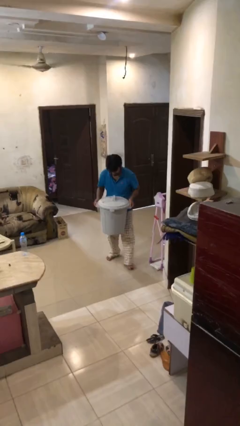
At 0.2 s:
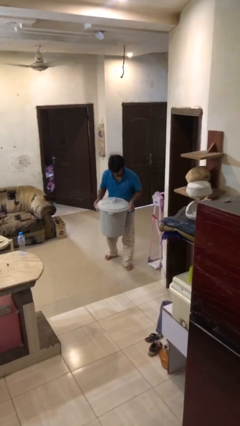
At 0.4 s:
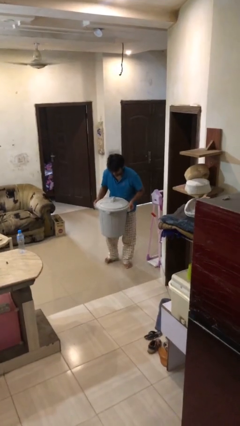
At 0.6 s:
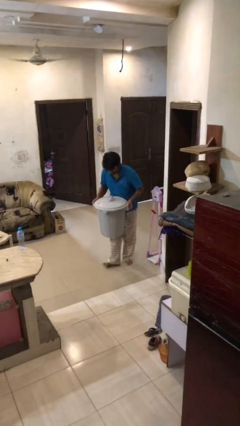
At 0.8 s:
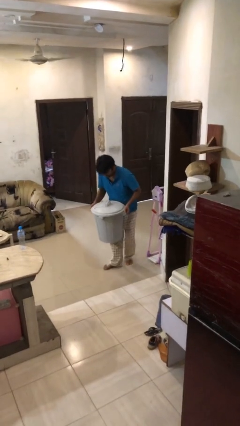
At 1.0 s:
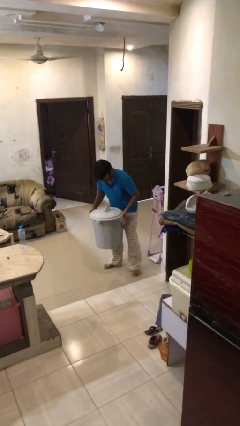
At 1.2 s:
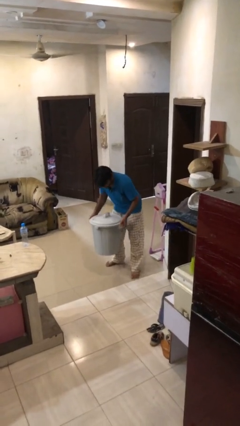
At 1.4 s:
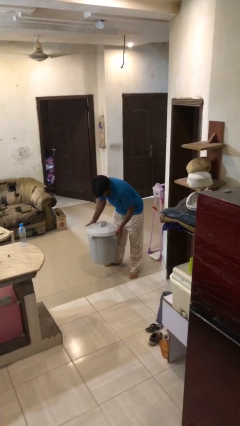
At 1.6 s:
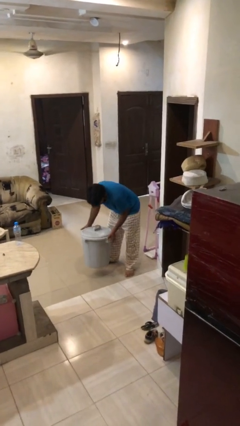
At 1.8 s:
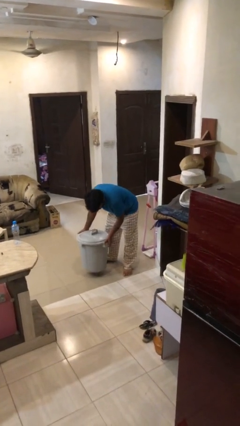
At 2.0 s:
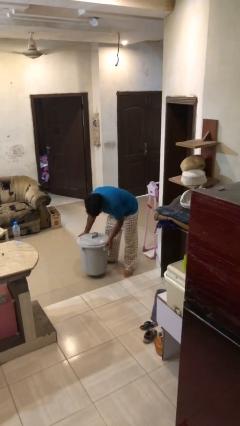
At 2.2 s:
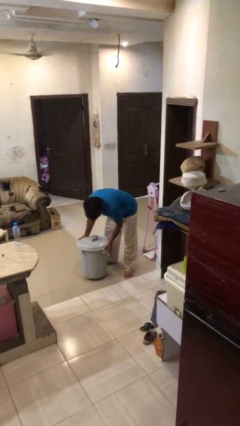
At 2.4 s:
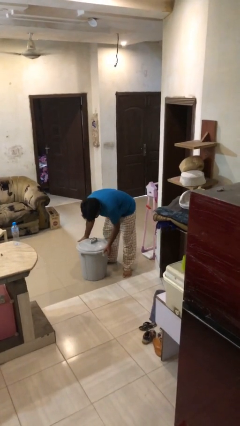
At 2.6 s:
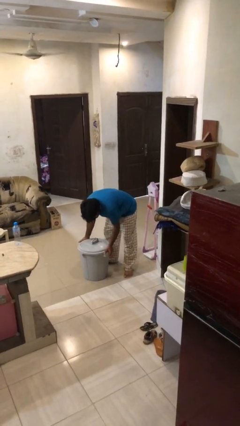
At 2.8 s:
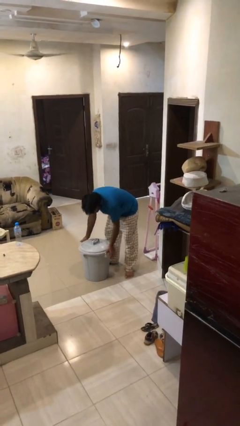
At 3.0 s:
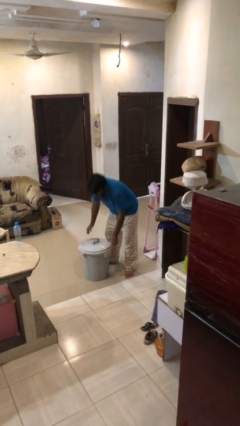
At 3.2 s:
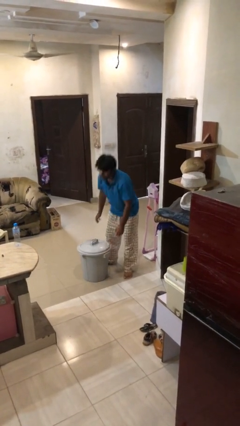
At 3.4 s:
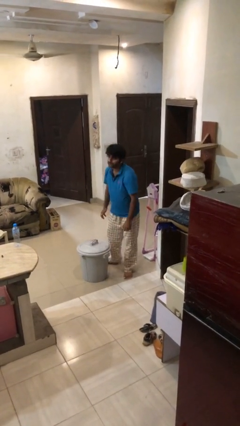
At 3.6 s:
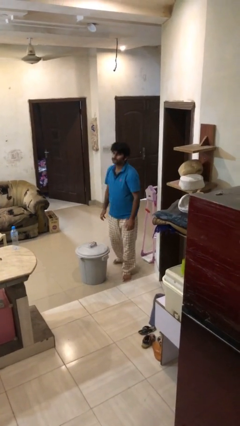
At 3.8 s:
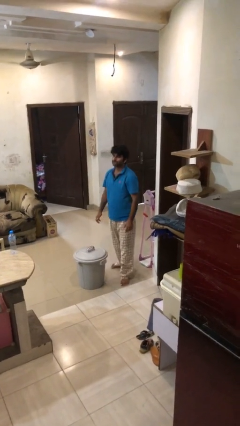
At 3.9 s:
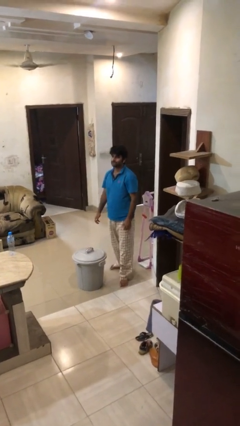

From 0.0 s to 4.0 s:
person puts down object on floor

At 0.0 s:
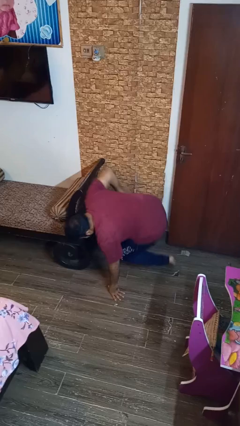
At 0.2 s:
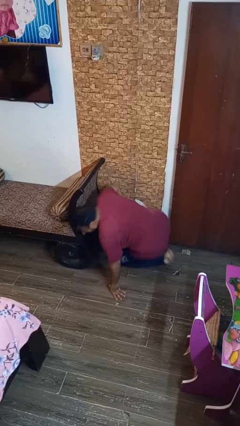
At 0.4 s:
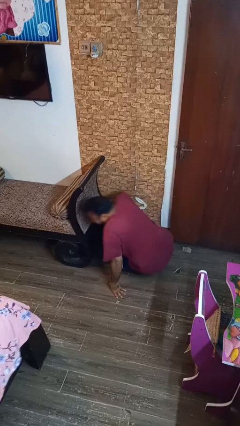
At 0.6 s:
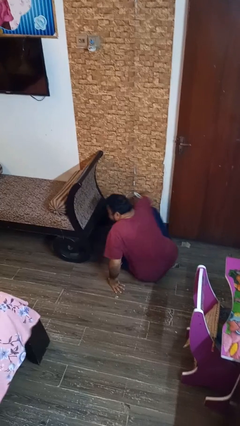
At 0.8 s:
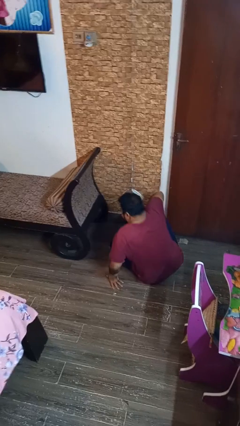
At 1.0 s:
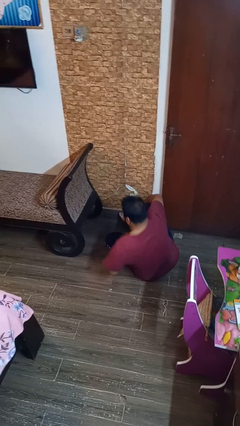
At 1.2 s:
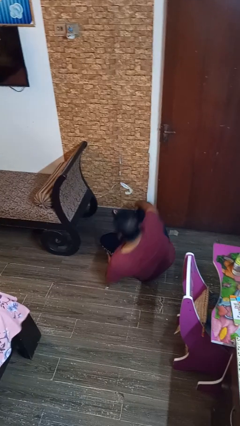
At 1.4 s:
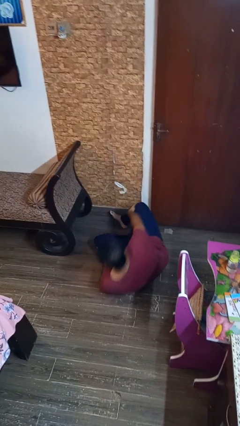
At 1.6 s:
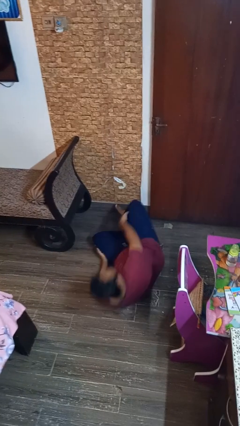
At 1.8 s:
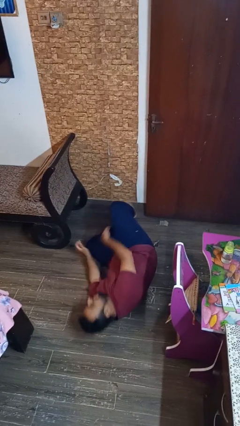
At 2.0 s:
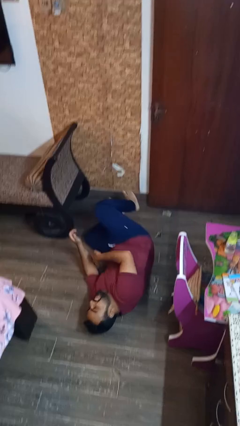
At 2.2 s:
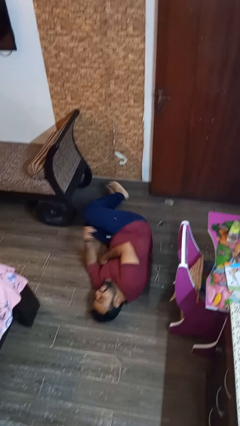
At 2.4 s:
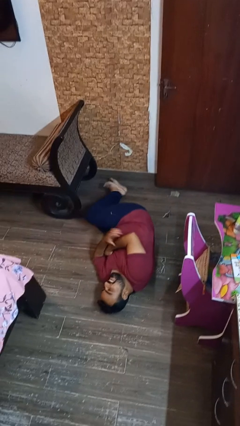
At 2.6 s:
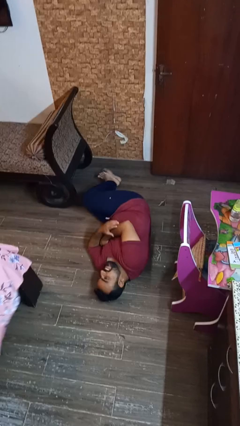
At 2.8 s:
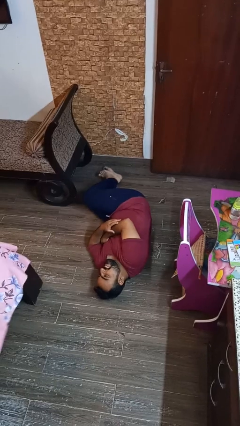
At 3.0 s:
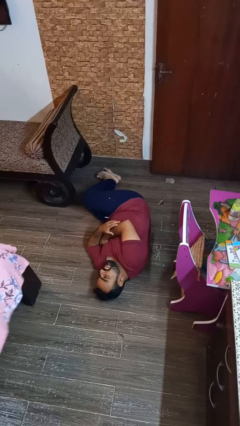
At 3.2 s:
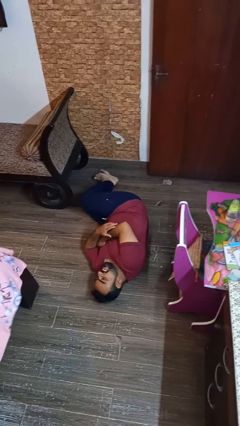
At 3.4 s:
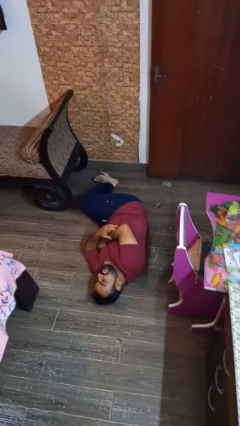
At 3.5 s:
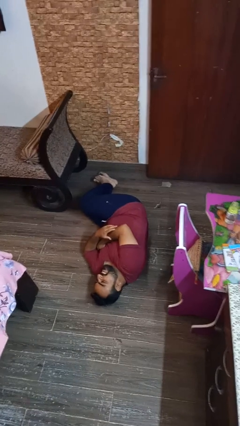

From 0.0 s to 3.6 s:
person lies down on floor

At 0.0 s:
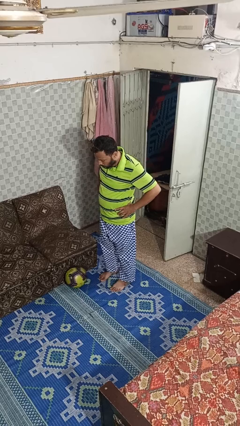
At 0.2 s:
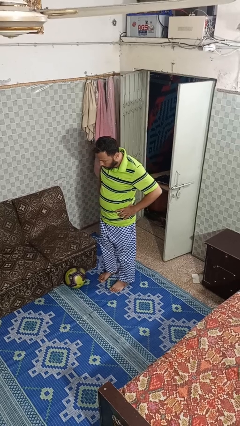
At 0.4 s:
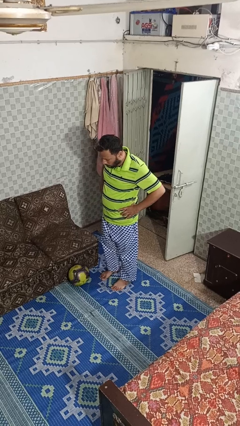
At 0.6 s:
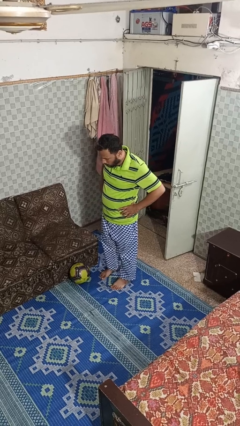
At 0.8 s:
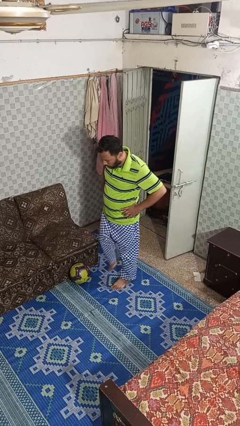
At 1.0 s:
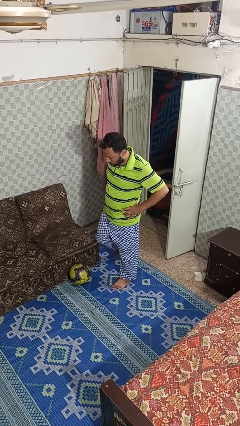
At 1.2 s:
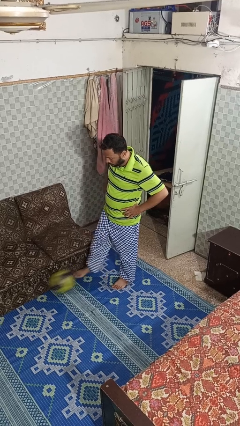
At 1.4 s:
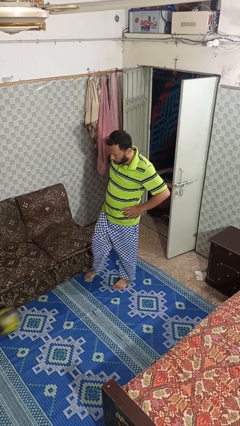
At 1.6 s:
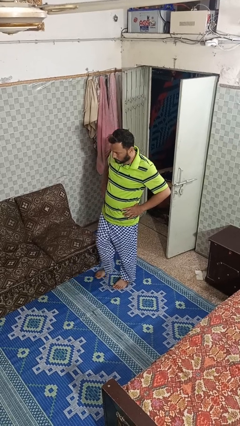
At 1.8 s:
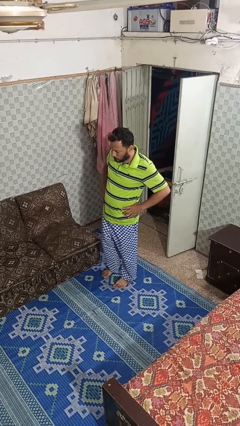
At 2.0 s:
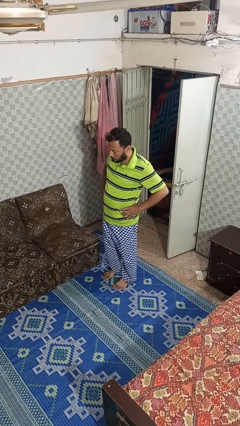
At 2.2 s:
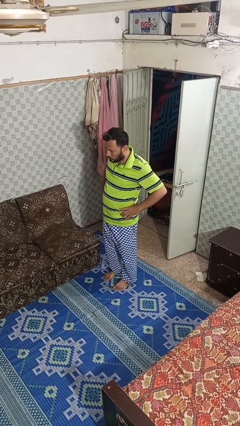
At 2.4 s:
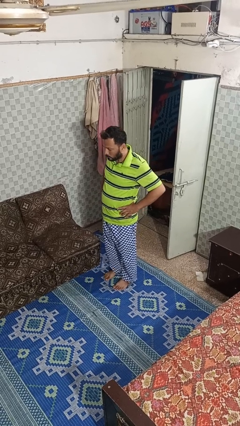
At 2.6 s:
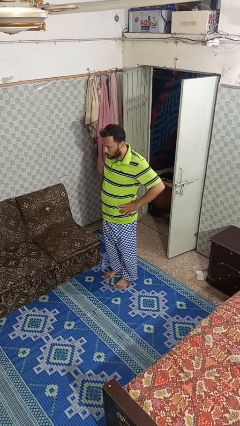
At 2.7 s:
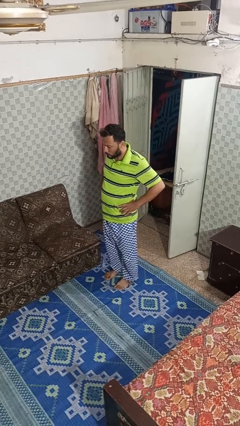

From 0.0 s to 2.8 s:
person kicks object to person

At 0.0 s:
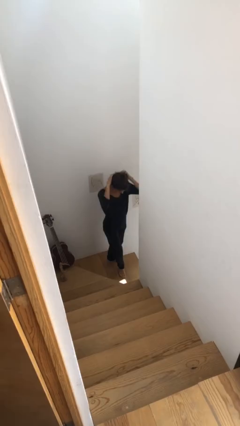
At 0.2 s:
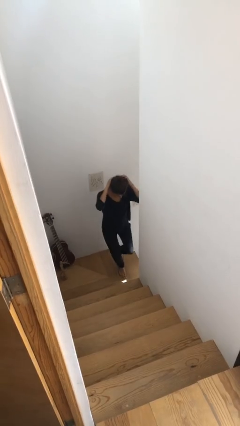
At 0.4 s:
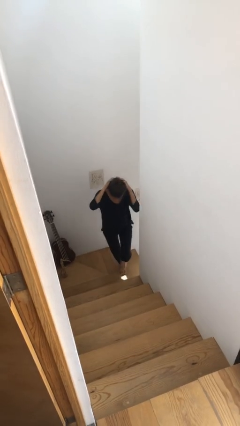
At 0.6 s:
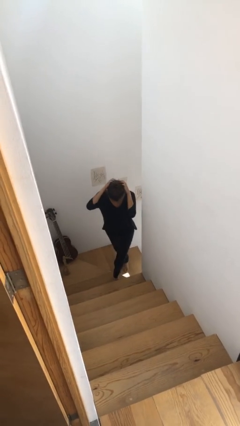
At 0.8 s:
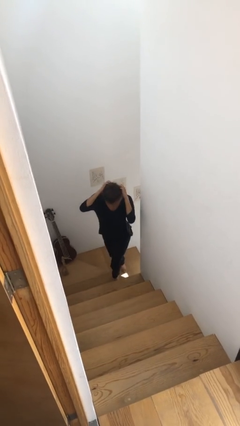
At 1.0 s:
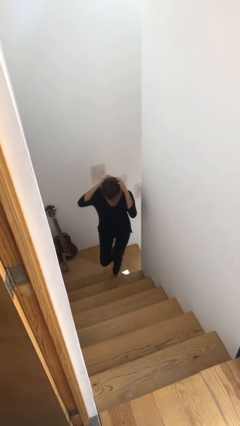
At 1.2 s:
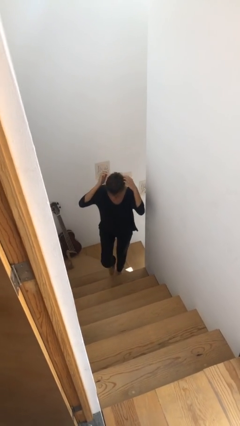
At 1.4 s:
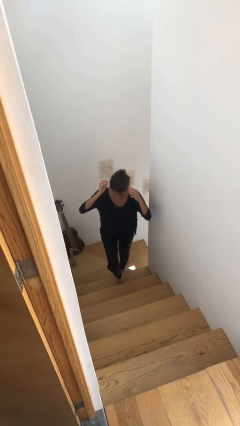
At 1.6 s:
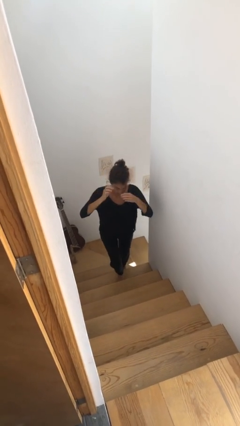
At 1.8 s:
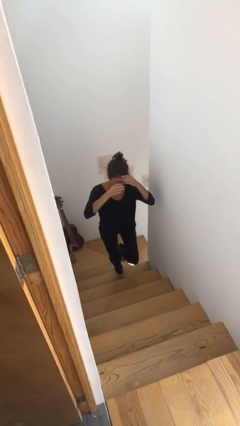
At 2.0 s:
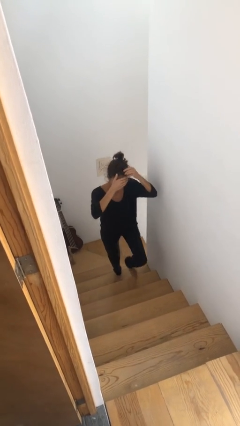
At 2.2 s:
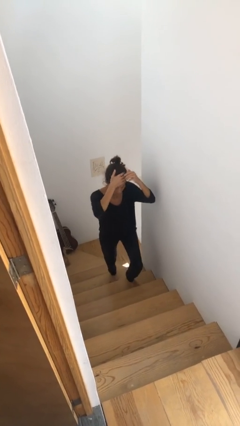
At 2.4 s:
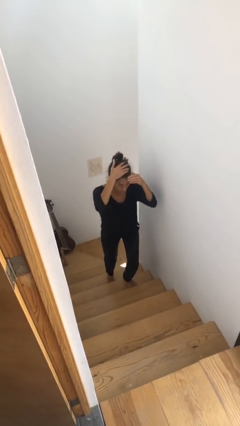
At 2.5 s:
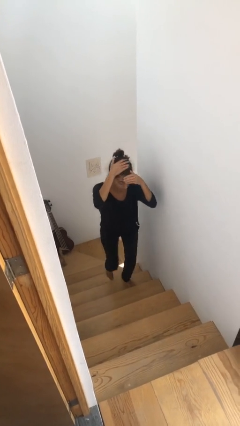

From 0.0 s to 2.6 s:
person climbs up stairs

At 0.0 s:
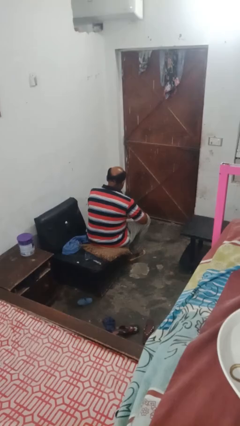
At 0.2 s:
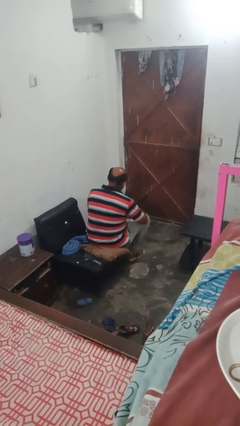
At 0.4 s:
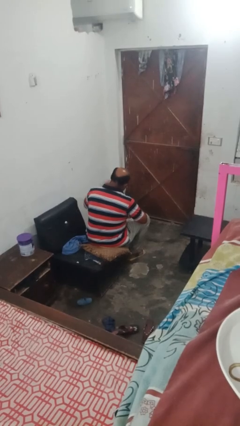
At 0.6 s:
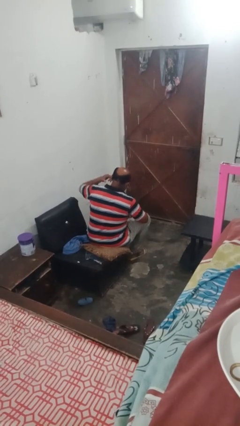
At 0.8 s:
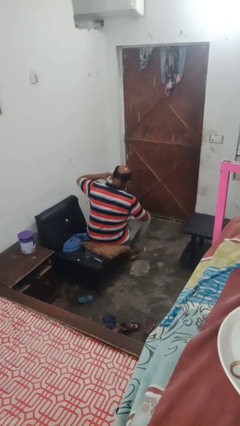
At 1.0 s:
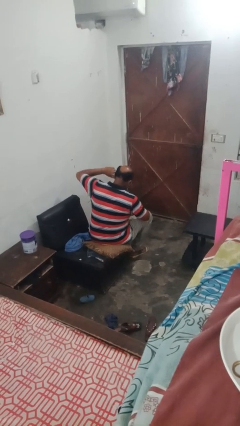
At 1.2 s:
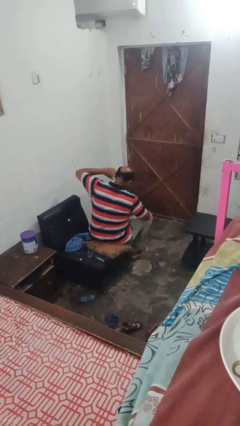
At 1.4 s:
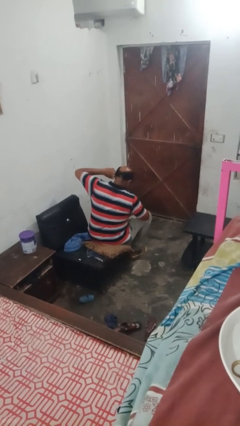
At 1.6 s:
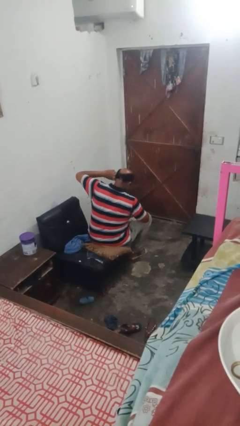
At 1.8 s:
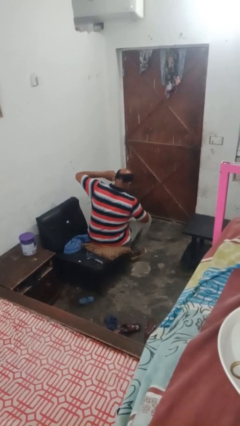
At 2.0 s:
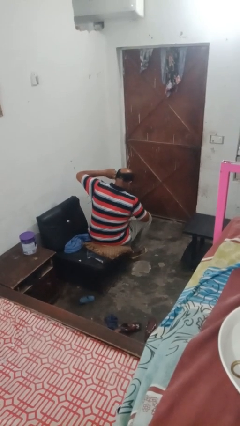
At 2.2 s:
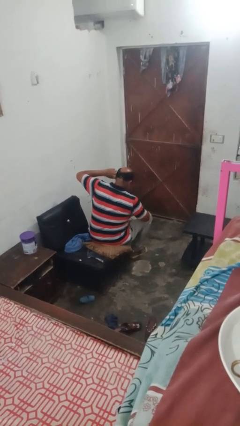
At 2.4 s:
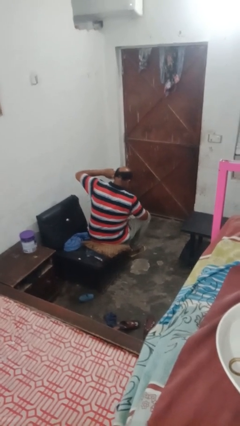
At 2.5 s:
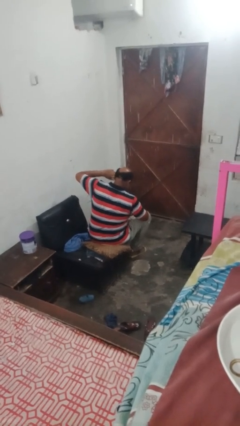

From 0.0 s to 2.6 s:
person puts fingers in ear

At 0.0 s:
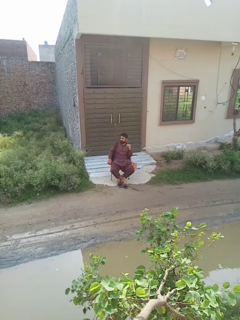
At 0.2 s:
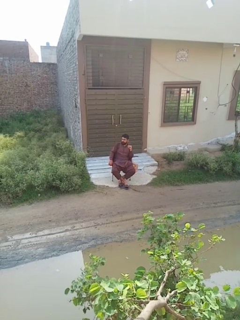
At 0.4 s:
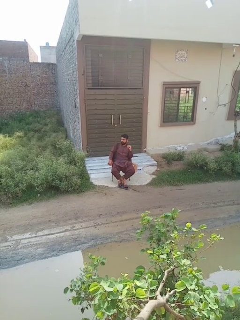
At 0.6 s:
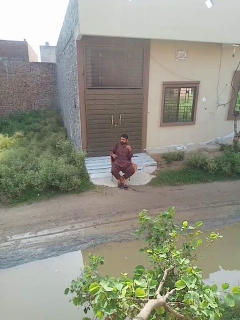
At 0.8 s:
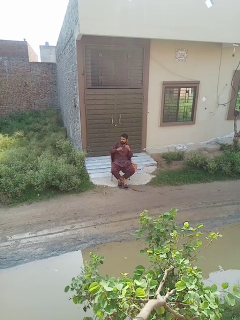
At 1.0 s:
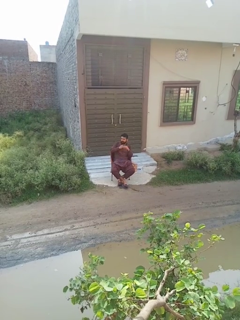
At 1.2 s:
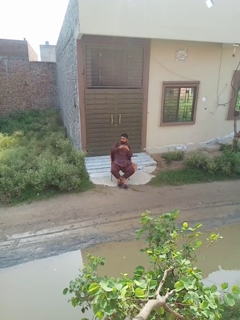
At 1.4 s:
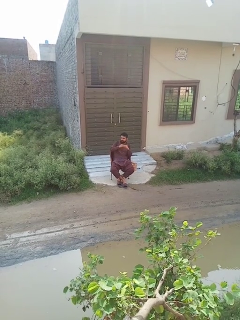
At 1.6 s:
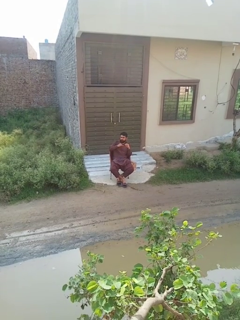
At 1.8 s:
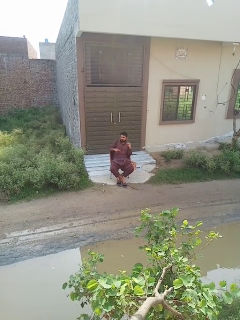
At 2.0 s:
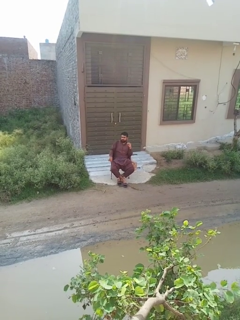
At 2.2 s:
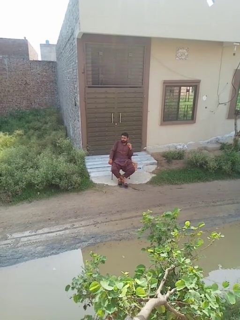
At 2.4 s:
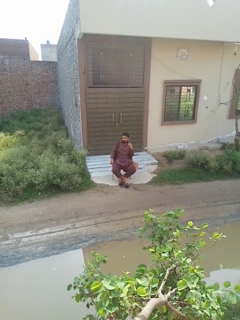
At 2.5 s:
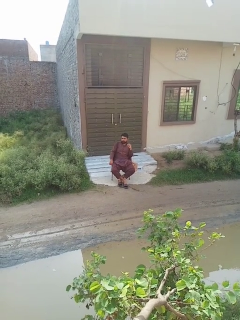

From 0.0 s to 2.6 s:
person takes off ring
